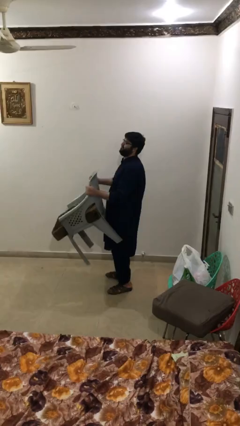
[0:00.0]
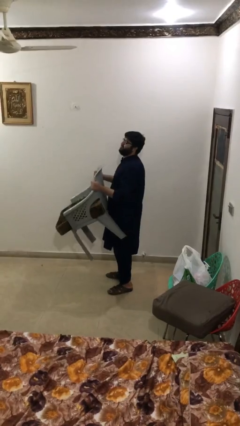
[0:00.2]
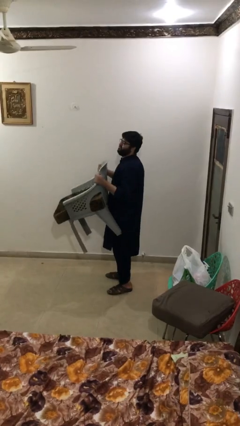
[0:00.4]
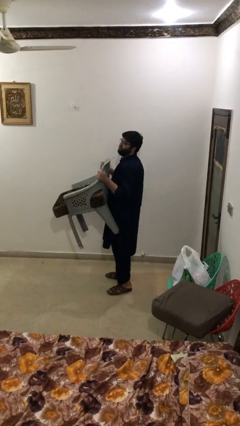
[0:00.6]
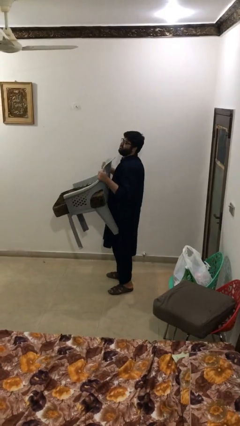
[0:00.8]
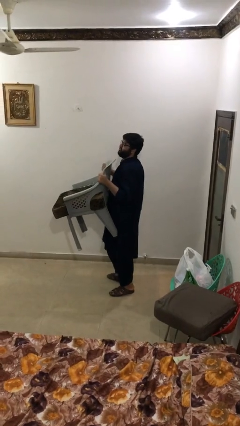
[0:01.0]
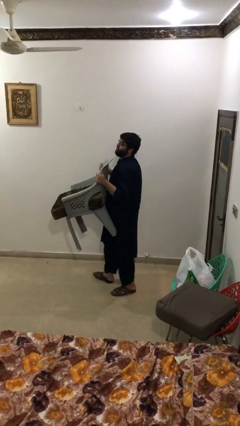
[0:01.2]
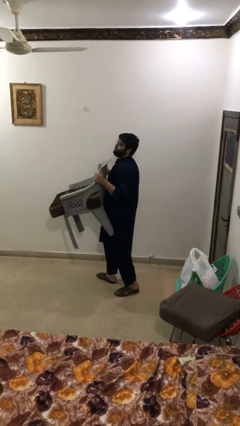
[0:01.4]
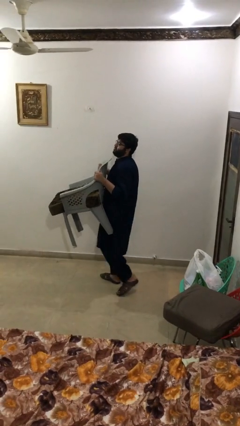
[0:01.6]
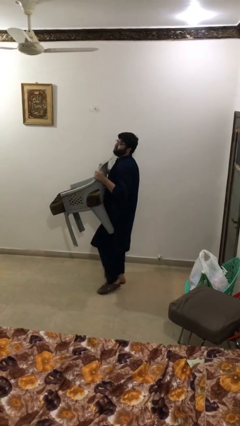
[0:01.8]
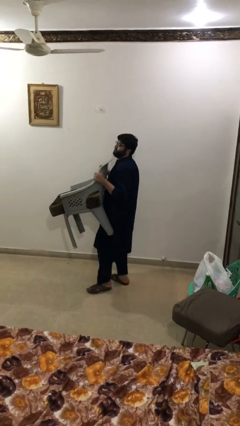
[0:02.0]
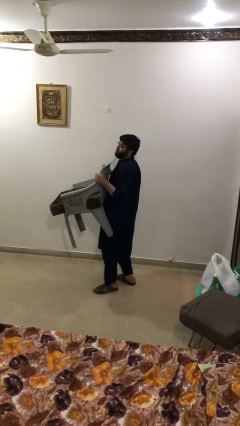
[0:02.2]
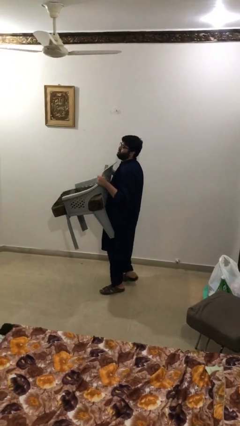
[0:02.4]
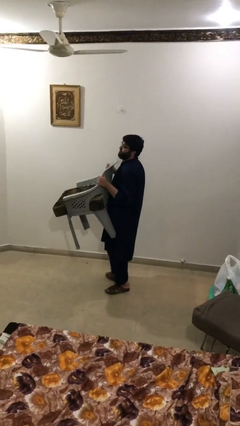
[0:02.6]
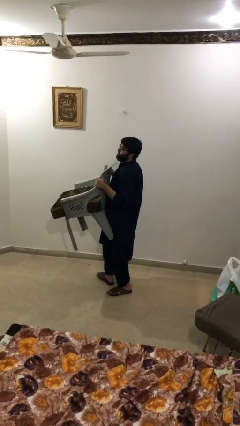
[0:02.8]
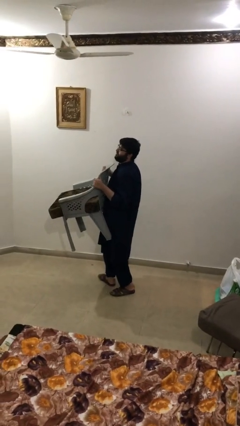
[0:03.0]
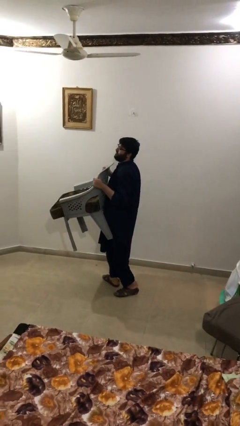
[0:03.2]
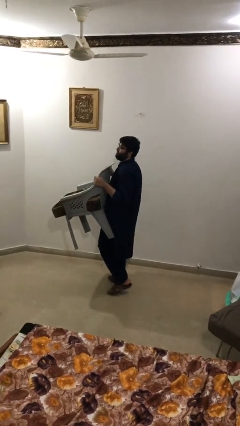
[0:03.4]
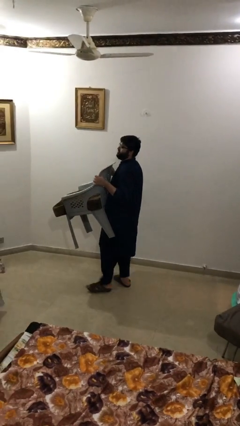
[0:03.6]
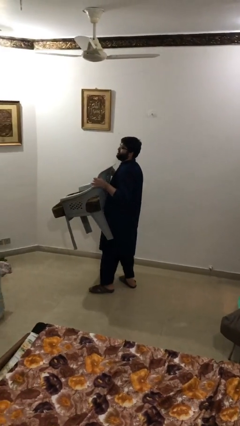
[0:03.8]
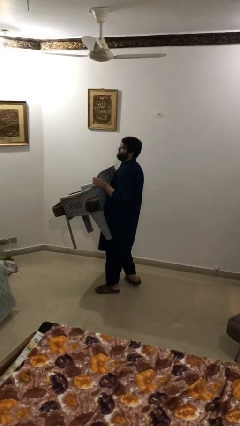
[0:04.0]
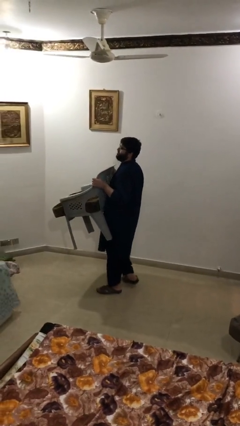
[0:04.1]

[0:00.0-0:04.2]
person carries heavy object

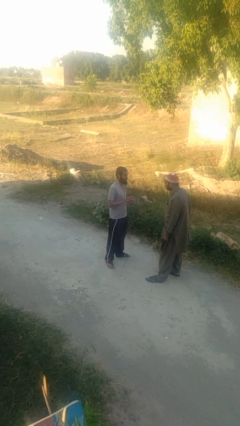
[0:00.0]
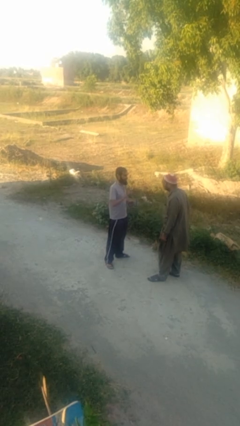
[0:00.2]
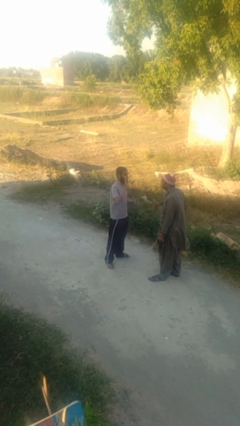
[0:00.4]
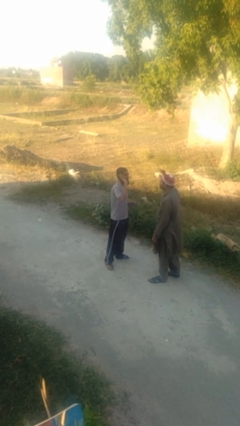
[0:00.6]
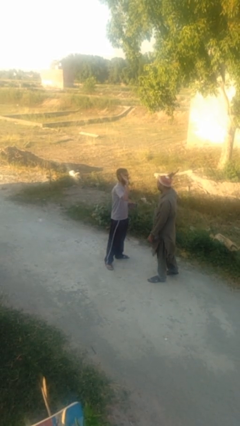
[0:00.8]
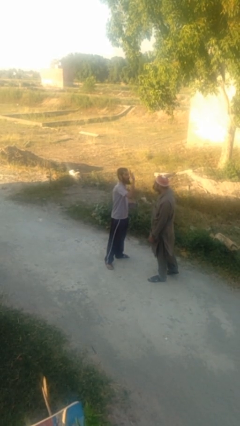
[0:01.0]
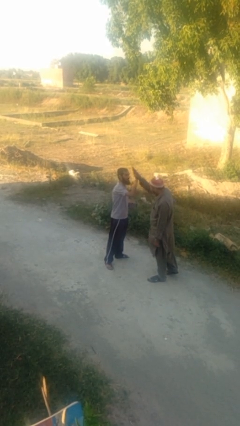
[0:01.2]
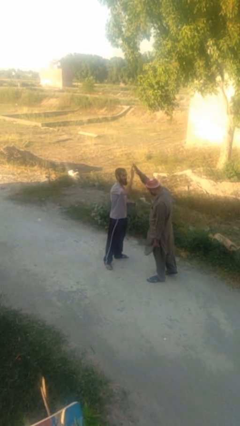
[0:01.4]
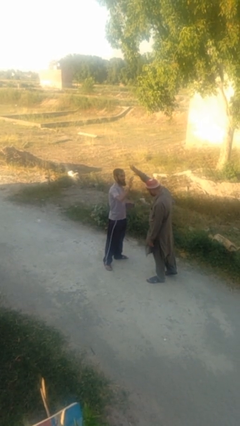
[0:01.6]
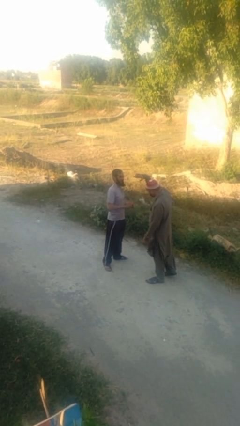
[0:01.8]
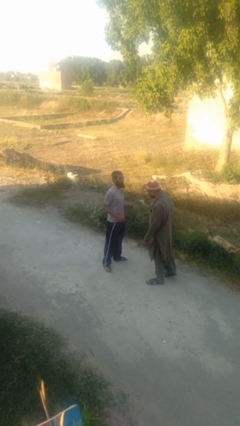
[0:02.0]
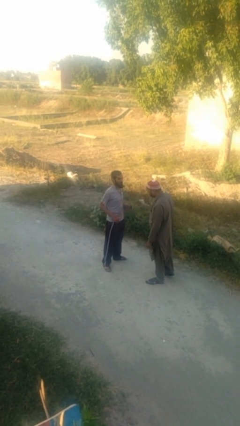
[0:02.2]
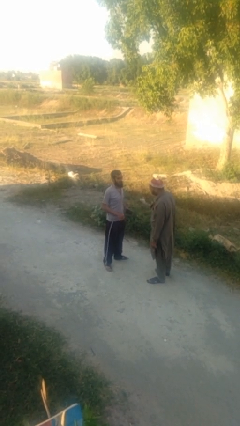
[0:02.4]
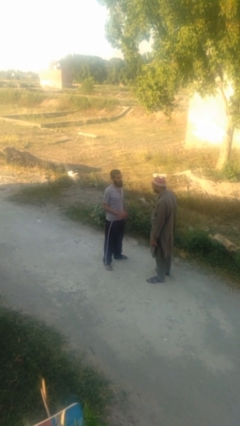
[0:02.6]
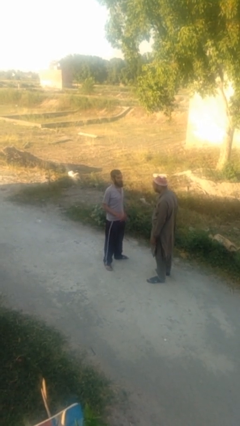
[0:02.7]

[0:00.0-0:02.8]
person highfives hand

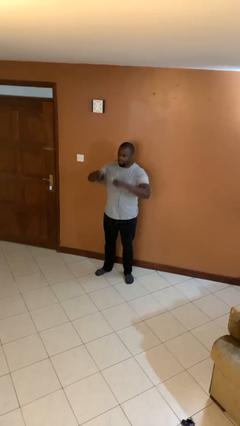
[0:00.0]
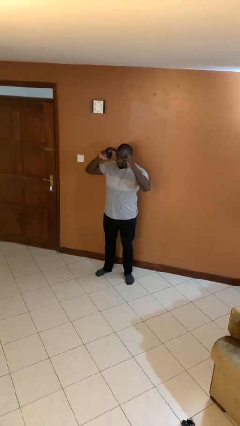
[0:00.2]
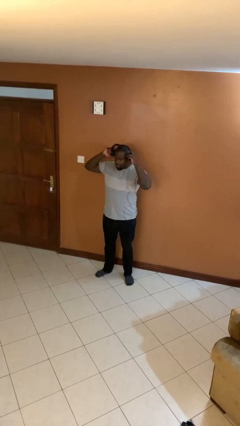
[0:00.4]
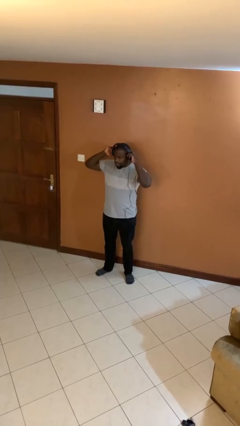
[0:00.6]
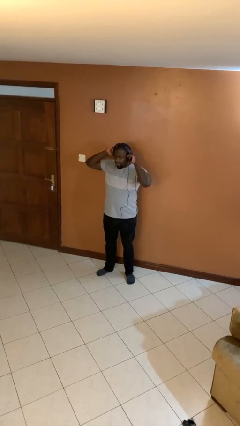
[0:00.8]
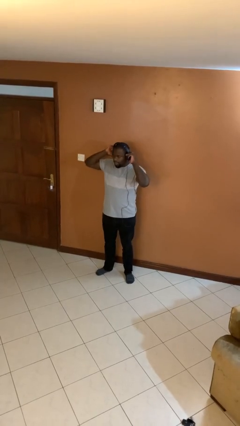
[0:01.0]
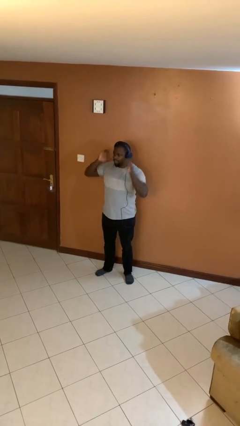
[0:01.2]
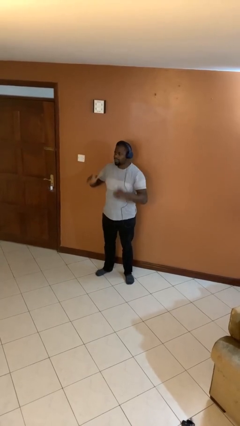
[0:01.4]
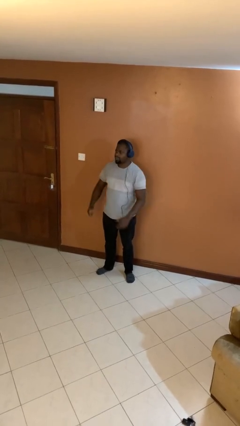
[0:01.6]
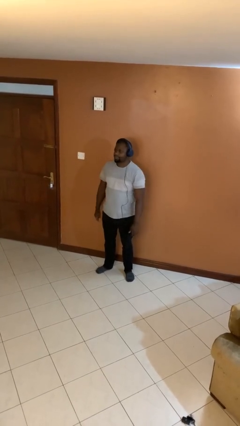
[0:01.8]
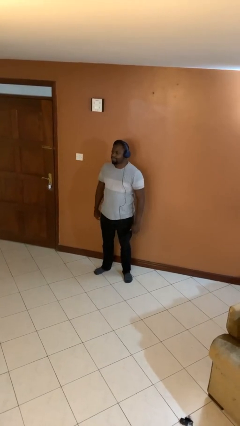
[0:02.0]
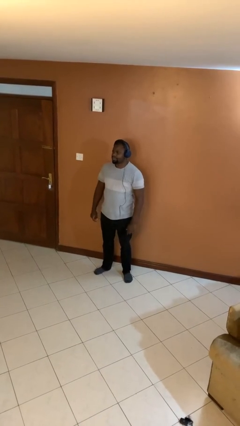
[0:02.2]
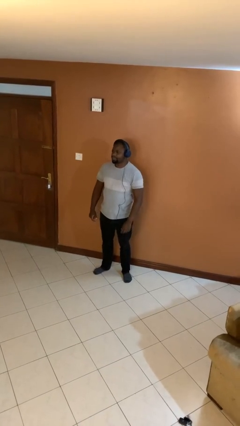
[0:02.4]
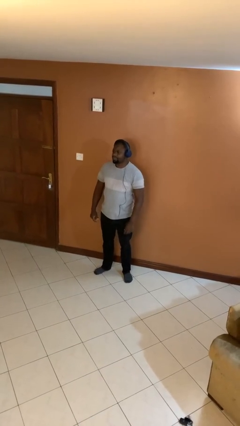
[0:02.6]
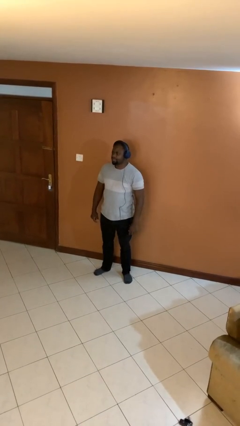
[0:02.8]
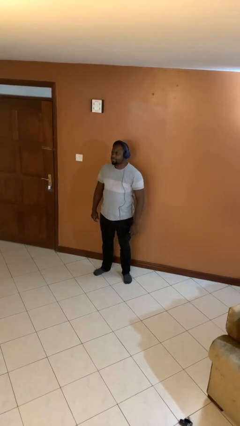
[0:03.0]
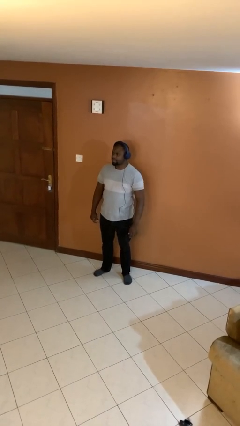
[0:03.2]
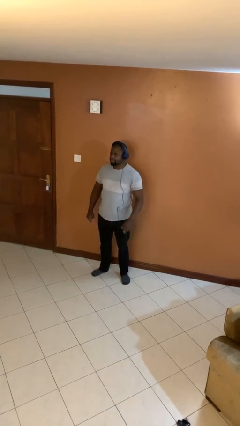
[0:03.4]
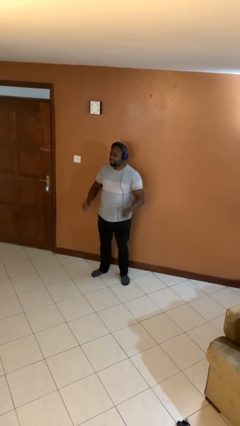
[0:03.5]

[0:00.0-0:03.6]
person puts on headphones

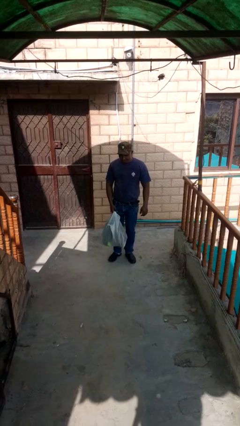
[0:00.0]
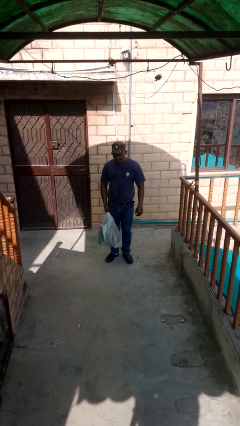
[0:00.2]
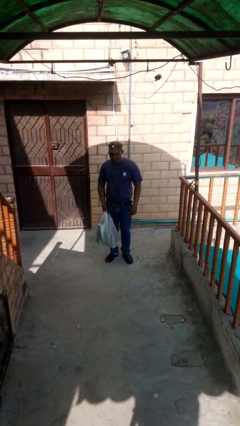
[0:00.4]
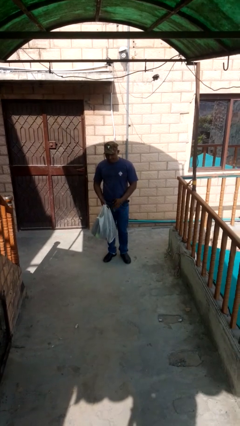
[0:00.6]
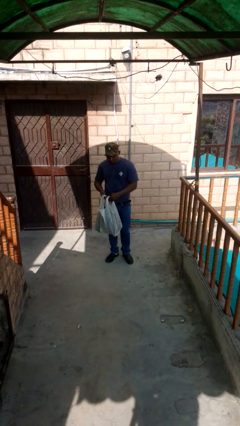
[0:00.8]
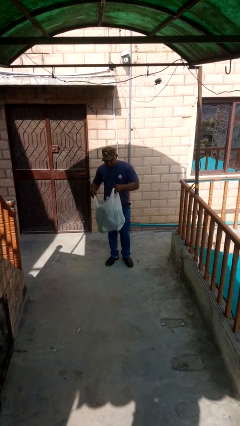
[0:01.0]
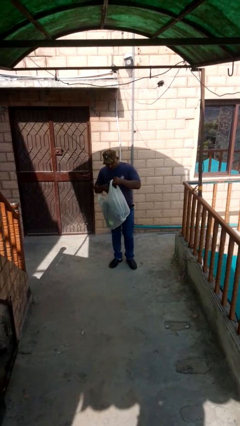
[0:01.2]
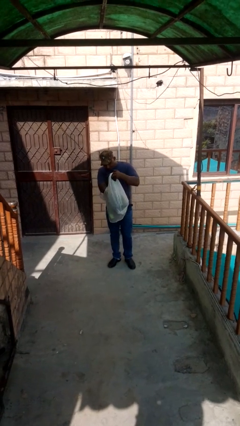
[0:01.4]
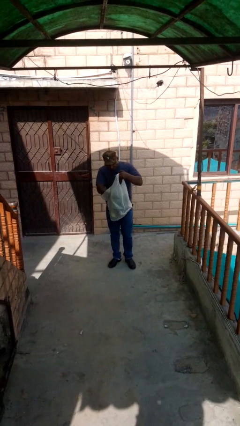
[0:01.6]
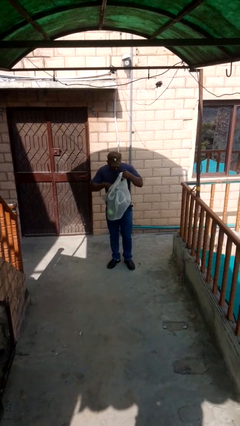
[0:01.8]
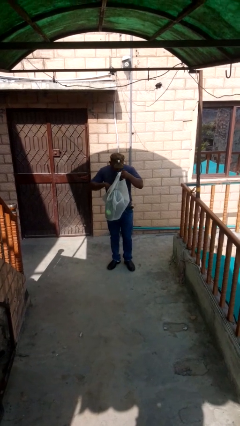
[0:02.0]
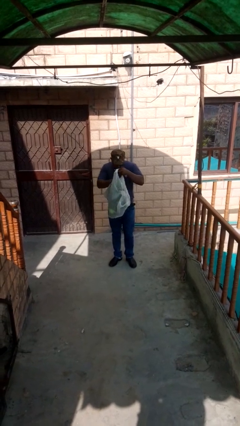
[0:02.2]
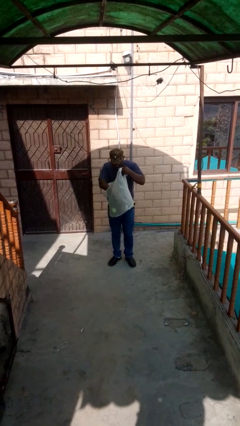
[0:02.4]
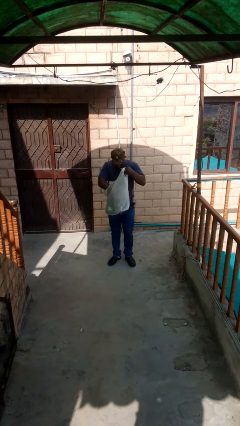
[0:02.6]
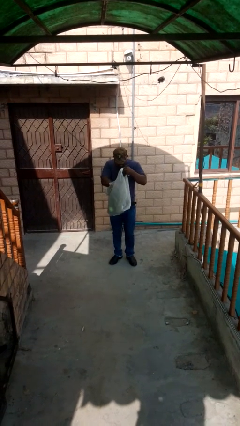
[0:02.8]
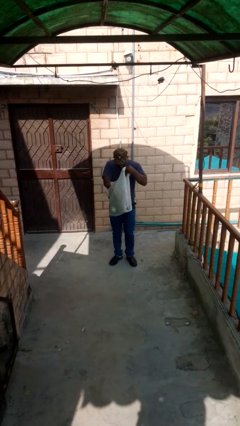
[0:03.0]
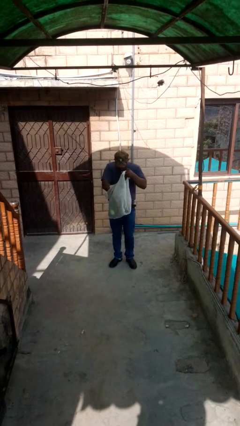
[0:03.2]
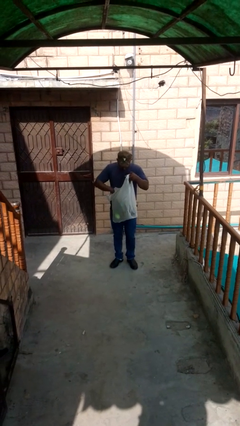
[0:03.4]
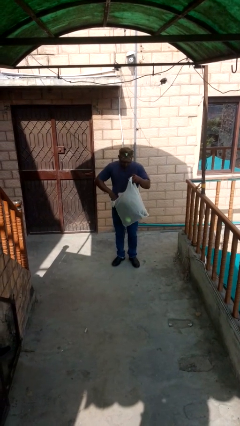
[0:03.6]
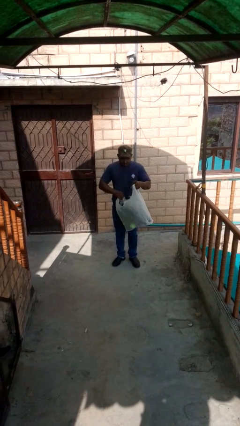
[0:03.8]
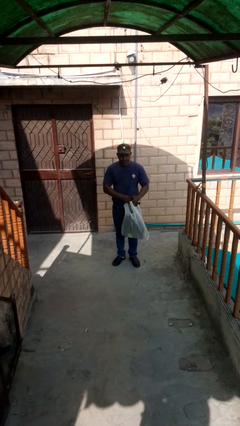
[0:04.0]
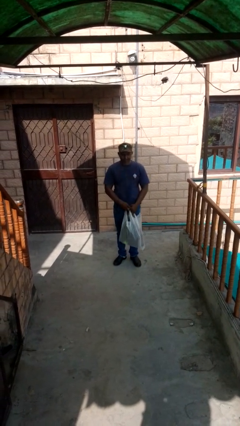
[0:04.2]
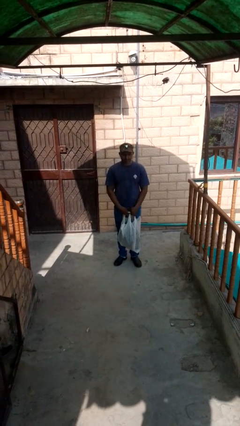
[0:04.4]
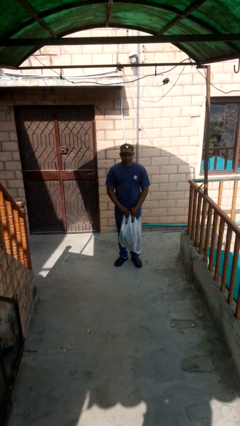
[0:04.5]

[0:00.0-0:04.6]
person searches in bag

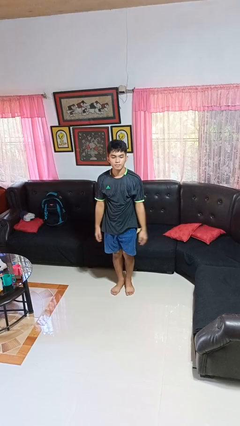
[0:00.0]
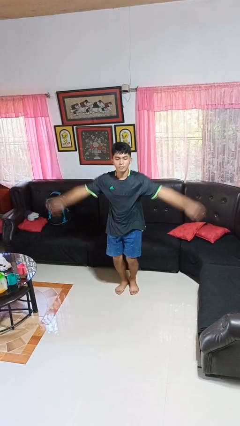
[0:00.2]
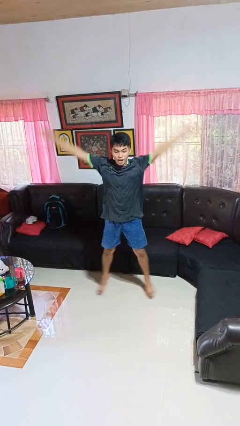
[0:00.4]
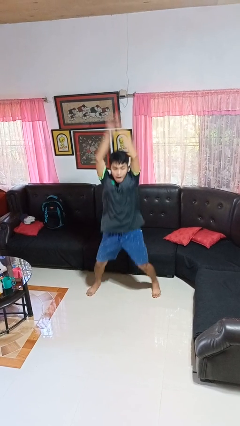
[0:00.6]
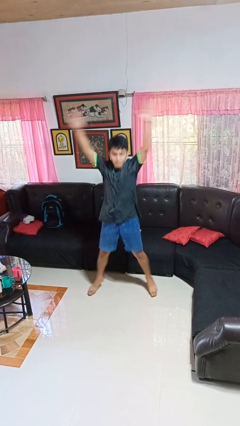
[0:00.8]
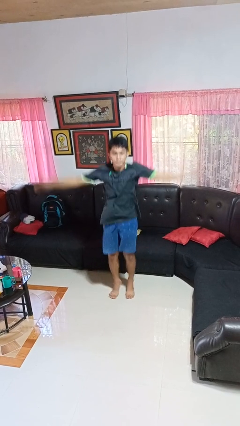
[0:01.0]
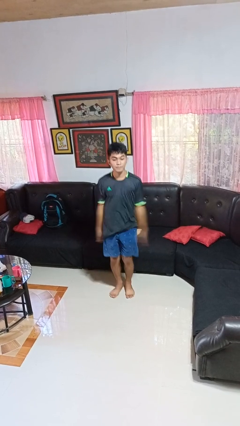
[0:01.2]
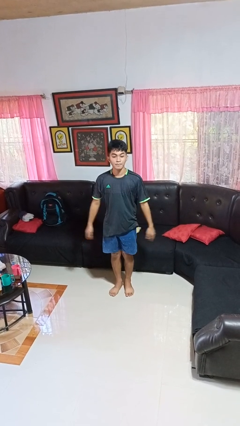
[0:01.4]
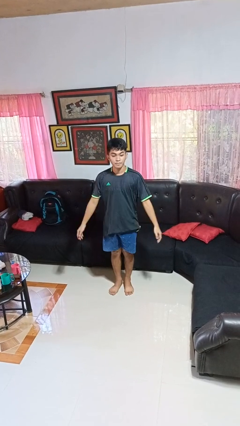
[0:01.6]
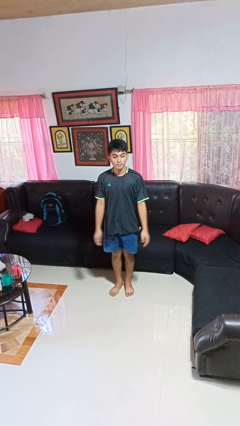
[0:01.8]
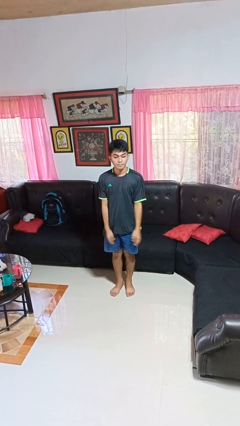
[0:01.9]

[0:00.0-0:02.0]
person exercises with jumping jacks

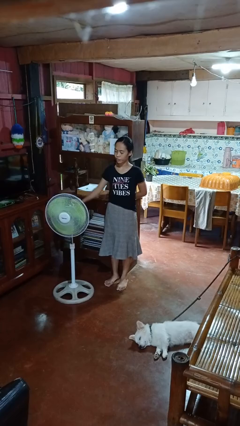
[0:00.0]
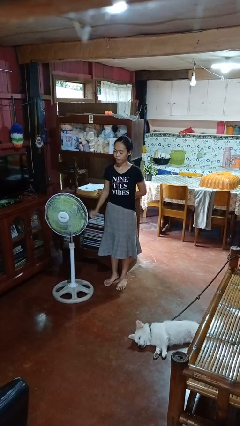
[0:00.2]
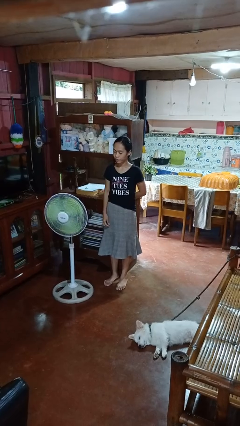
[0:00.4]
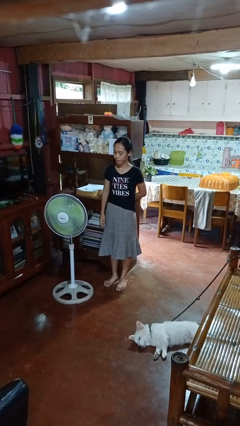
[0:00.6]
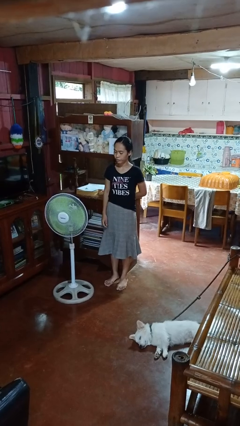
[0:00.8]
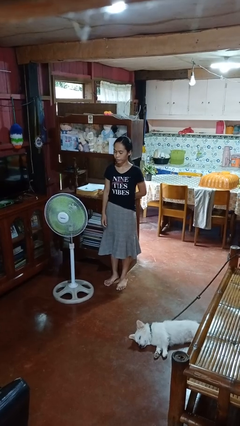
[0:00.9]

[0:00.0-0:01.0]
person turns off fan
